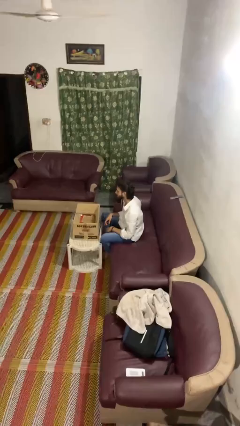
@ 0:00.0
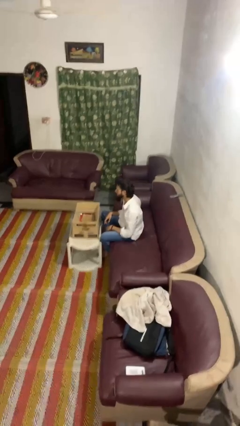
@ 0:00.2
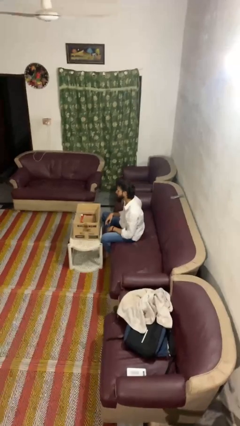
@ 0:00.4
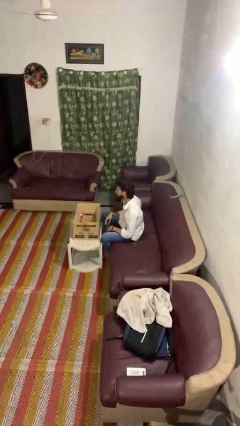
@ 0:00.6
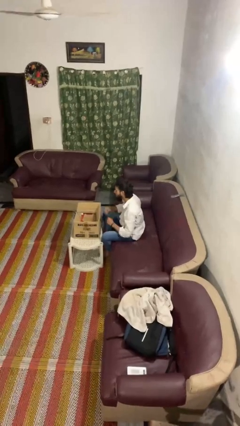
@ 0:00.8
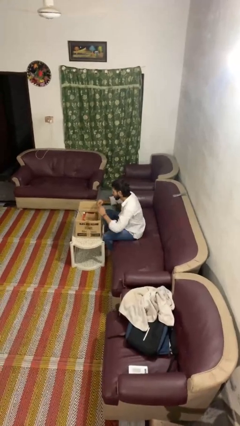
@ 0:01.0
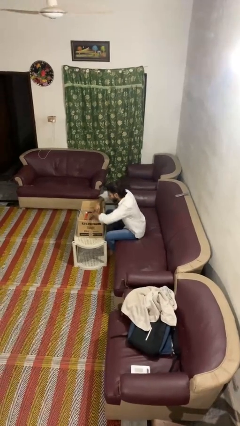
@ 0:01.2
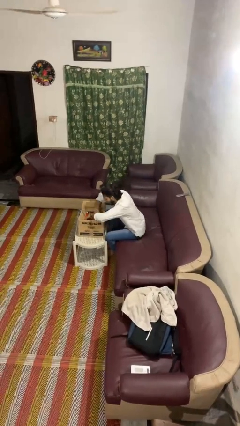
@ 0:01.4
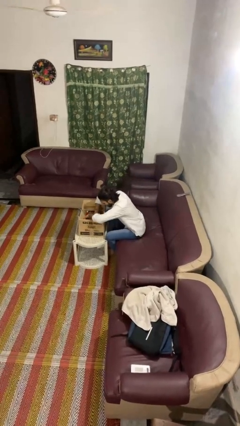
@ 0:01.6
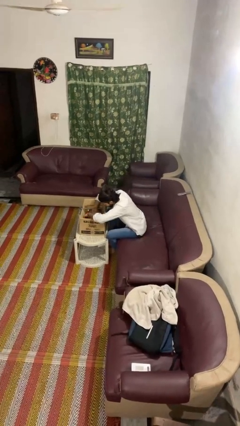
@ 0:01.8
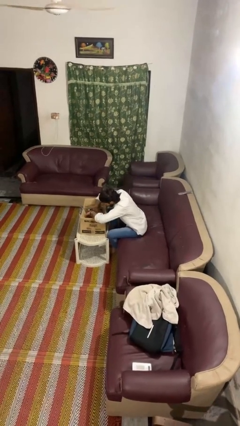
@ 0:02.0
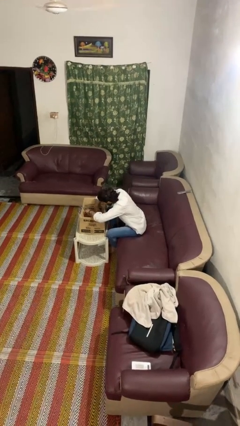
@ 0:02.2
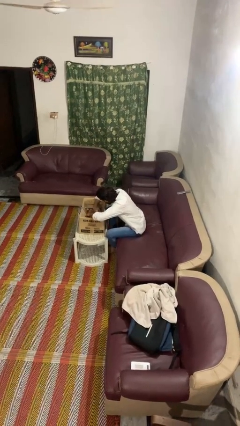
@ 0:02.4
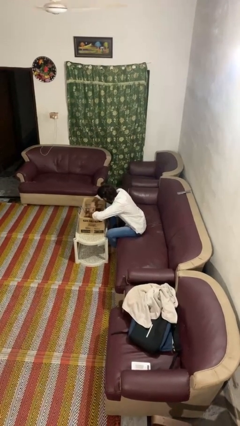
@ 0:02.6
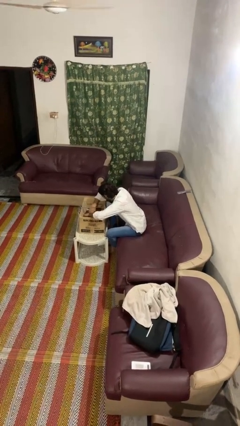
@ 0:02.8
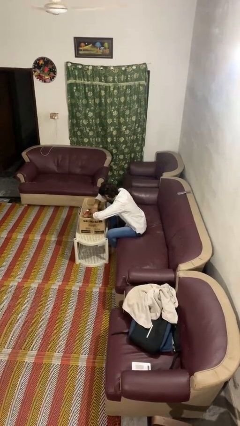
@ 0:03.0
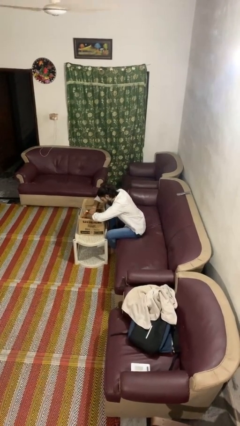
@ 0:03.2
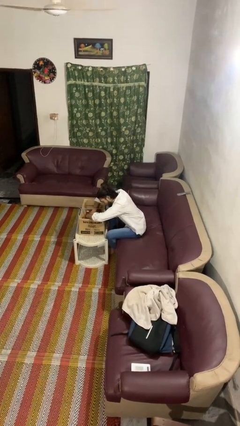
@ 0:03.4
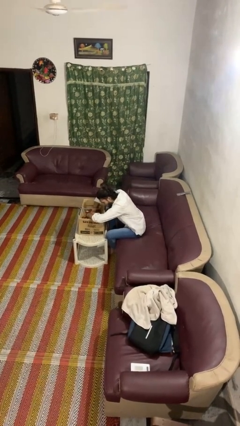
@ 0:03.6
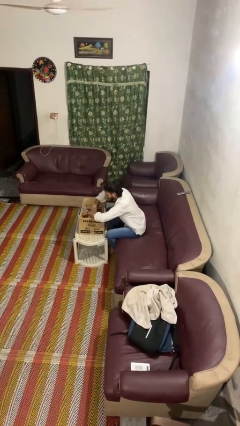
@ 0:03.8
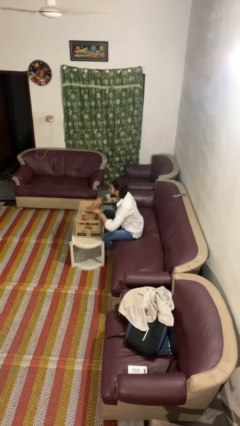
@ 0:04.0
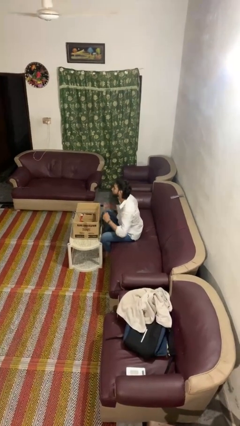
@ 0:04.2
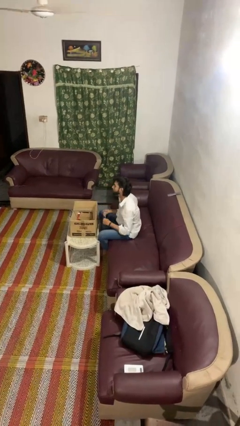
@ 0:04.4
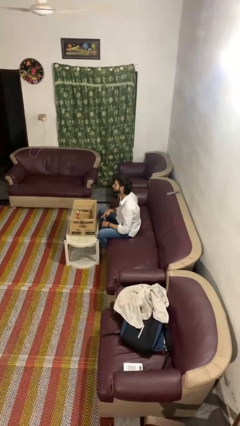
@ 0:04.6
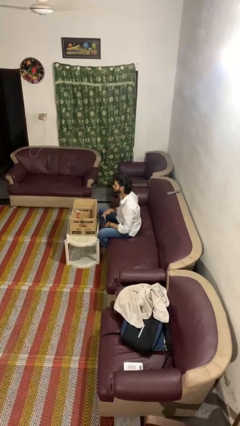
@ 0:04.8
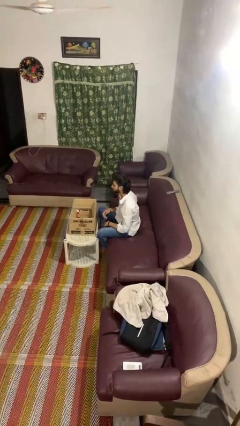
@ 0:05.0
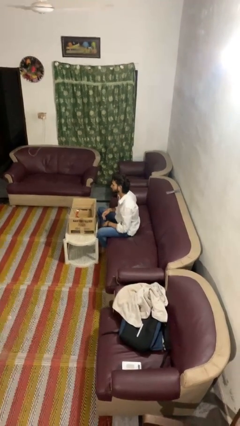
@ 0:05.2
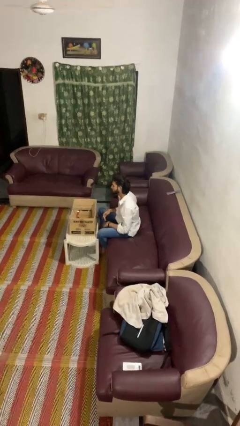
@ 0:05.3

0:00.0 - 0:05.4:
person searches in box

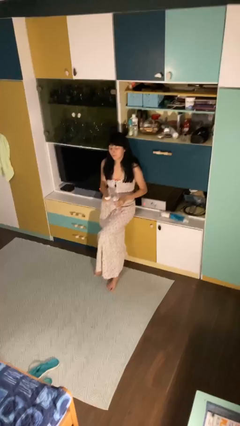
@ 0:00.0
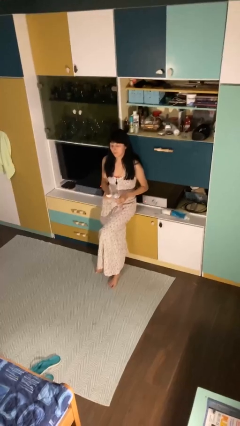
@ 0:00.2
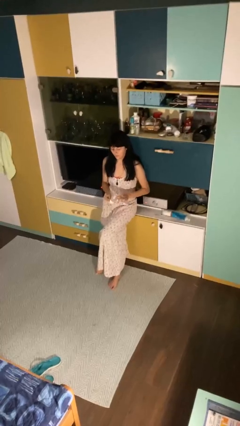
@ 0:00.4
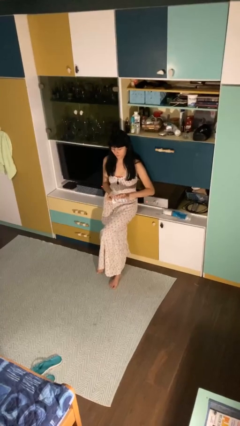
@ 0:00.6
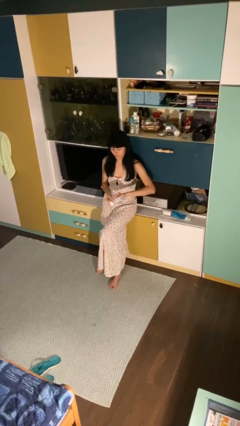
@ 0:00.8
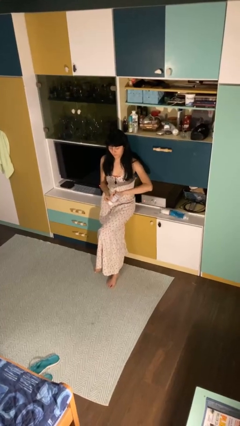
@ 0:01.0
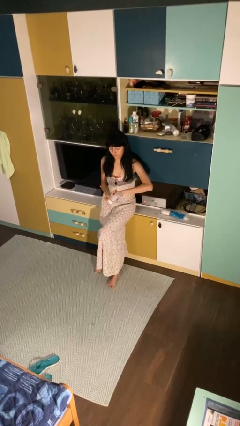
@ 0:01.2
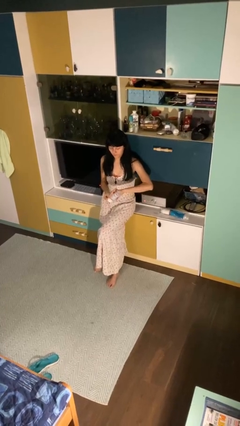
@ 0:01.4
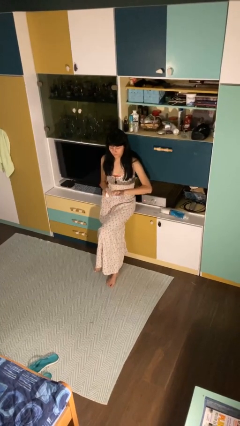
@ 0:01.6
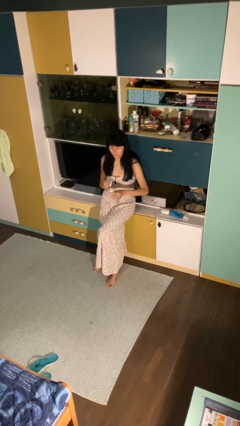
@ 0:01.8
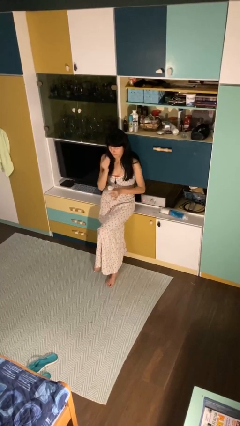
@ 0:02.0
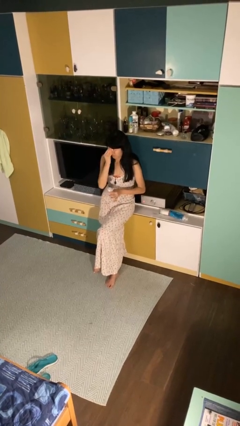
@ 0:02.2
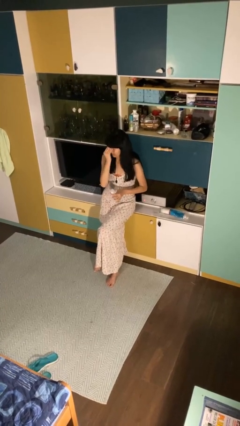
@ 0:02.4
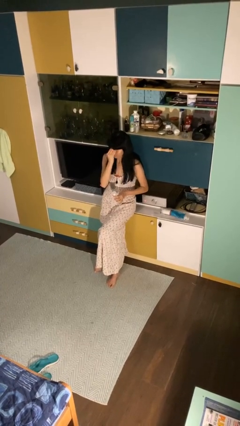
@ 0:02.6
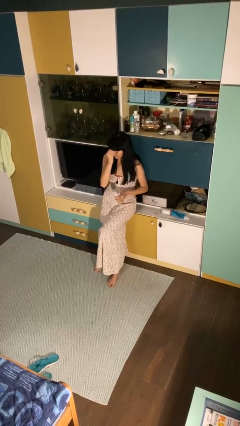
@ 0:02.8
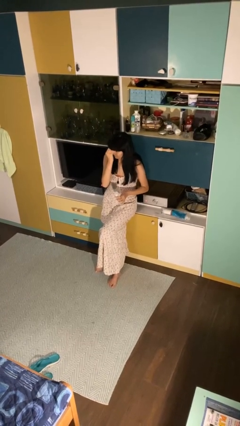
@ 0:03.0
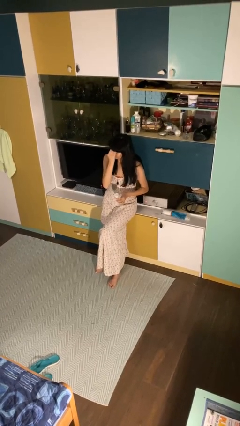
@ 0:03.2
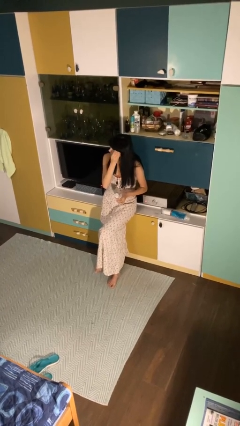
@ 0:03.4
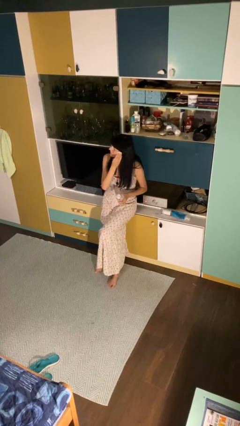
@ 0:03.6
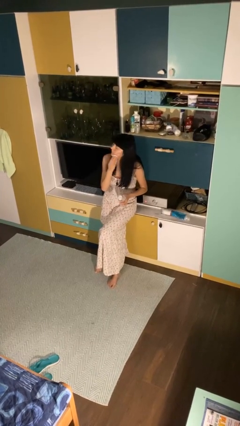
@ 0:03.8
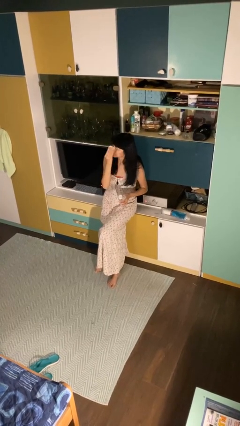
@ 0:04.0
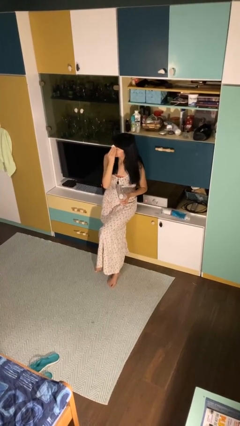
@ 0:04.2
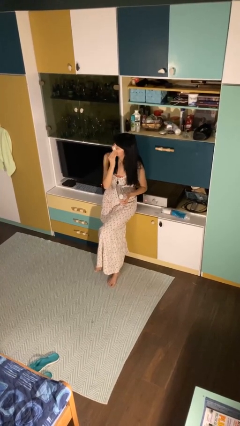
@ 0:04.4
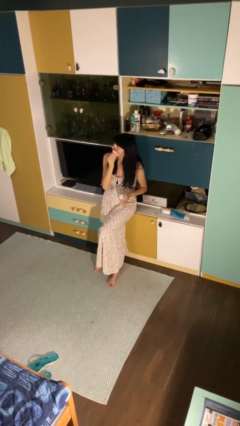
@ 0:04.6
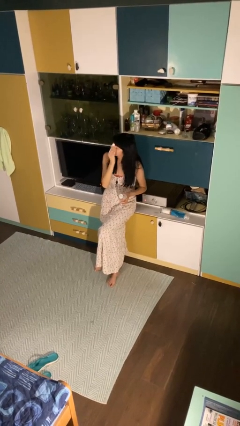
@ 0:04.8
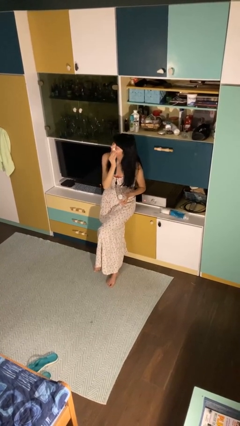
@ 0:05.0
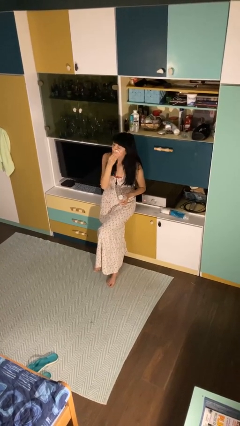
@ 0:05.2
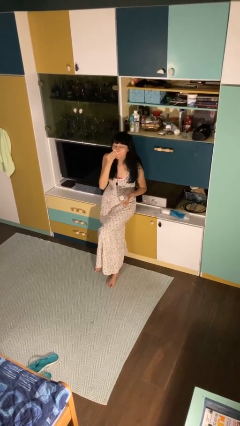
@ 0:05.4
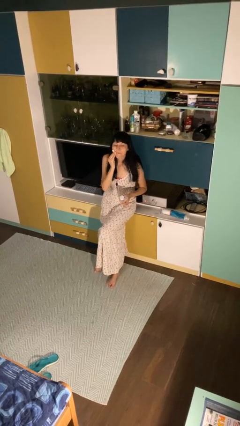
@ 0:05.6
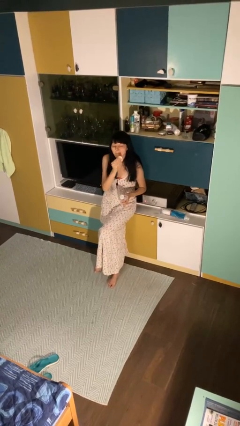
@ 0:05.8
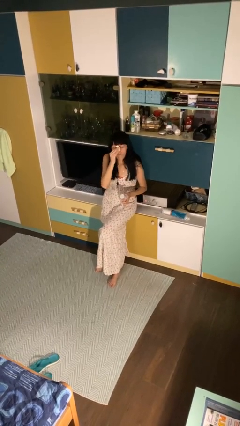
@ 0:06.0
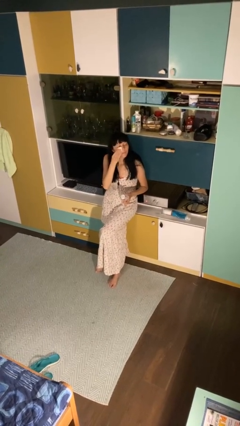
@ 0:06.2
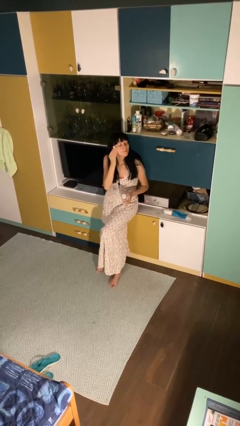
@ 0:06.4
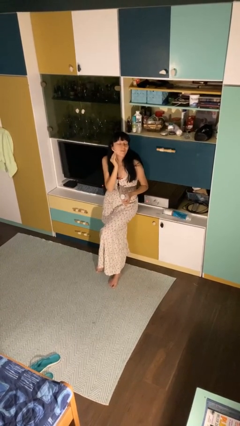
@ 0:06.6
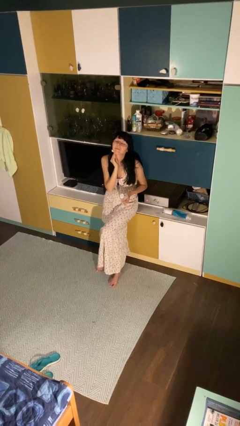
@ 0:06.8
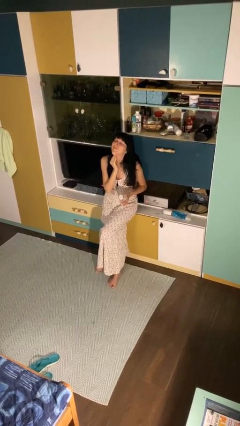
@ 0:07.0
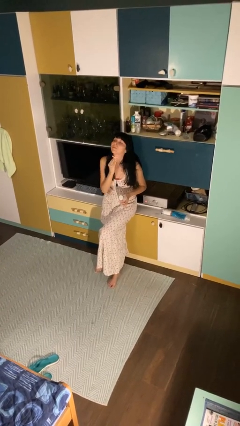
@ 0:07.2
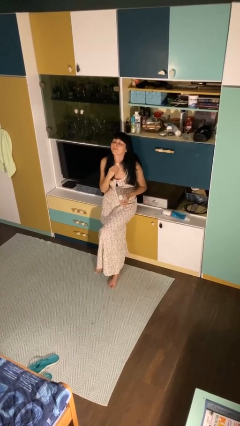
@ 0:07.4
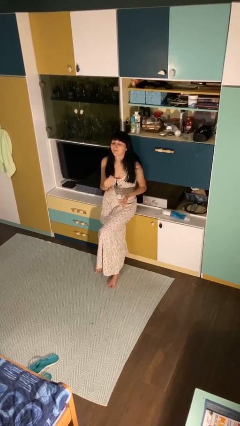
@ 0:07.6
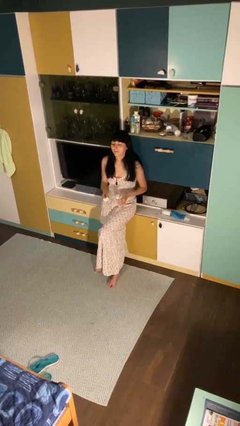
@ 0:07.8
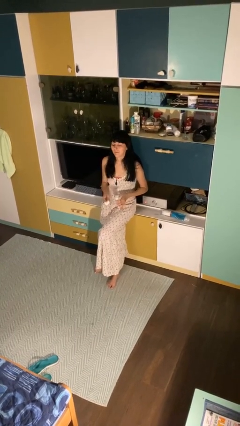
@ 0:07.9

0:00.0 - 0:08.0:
person applies facial moisturizer

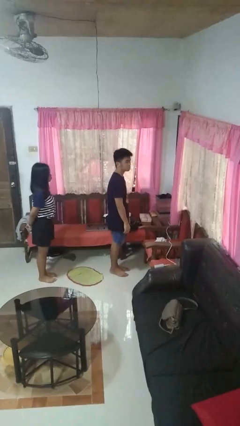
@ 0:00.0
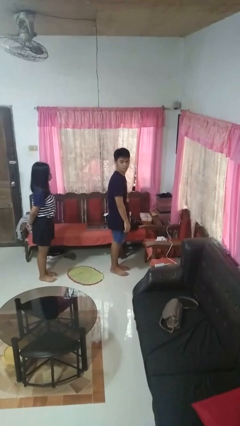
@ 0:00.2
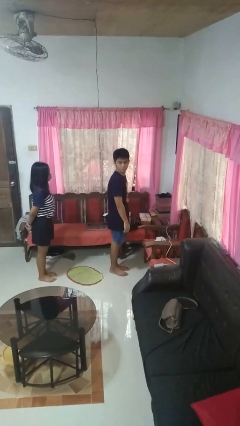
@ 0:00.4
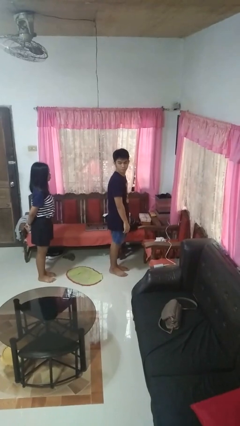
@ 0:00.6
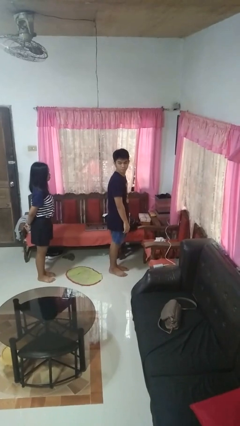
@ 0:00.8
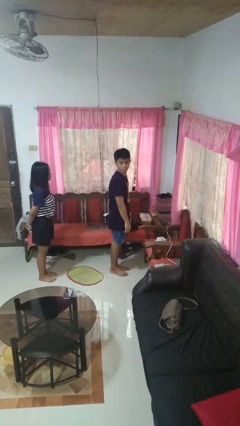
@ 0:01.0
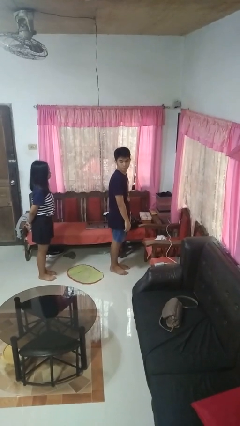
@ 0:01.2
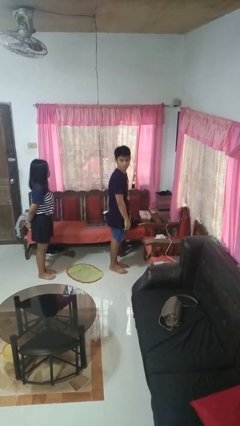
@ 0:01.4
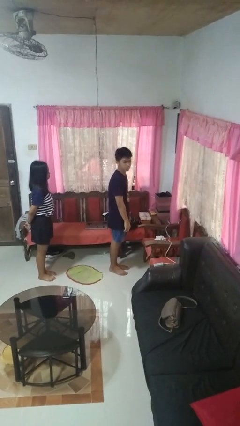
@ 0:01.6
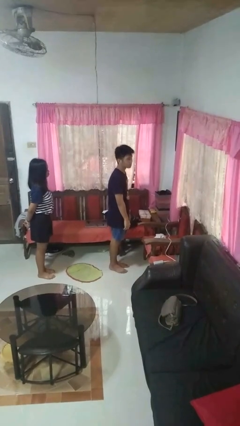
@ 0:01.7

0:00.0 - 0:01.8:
person looks over shoulder

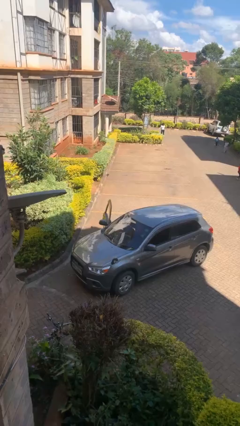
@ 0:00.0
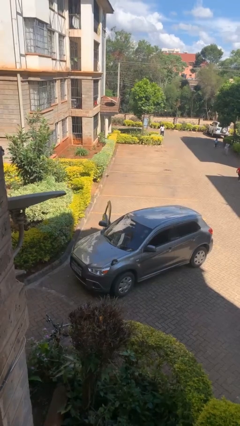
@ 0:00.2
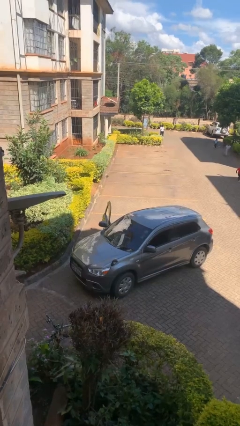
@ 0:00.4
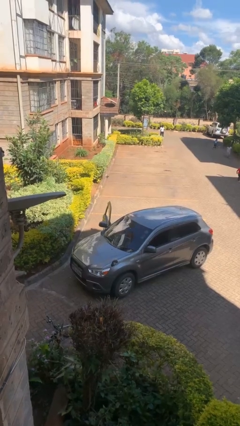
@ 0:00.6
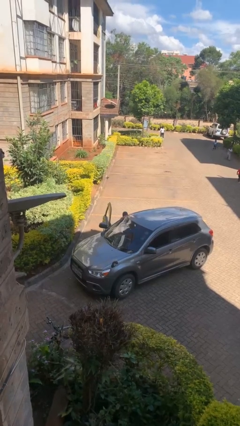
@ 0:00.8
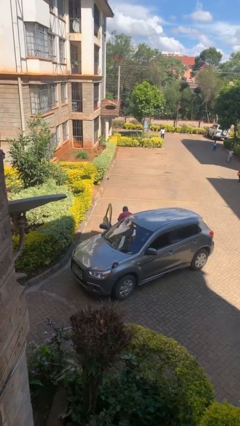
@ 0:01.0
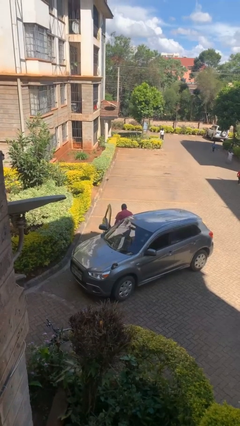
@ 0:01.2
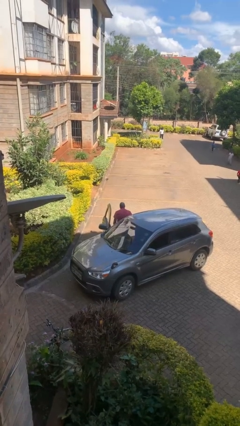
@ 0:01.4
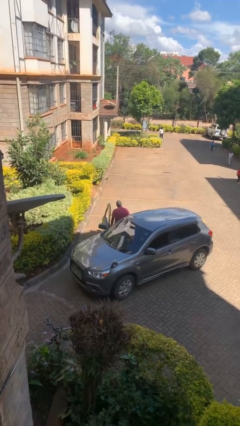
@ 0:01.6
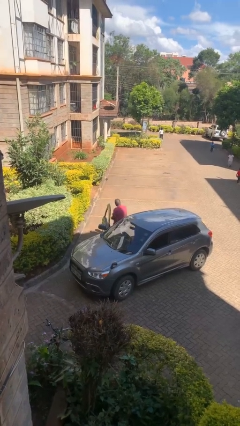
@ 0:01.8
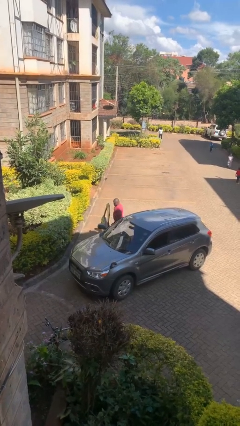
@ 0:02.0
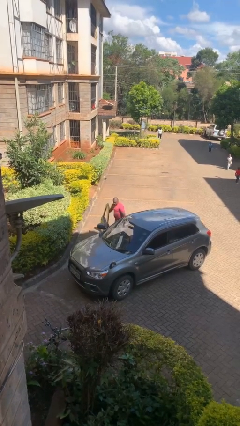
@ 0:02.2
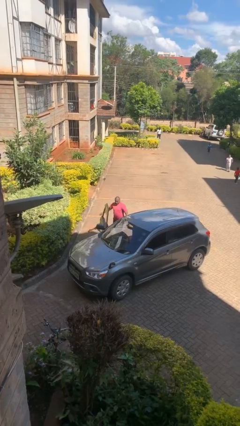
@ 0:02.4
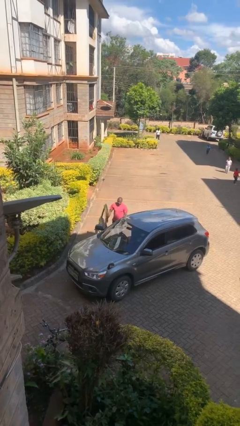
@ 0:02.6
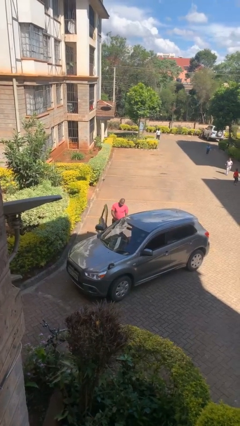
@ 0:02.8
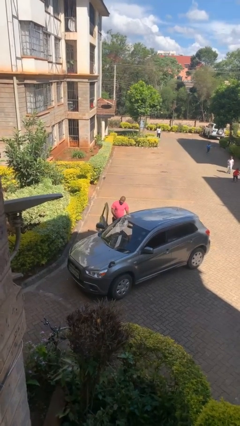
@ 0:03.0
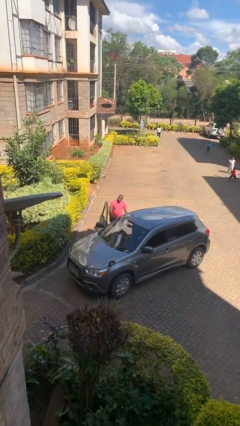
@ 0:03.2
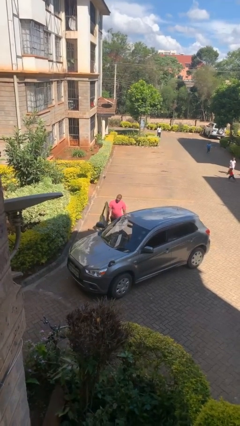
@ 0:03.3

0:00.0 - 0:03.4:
person exits car
